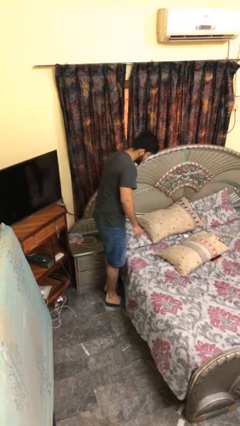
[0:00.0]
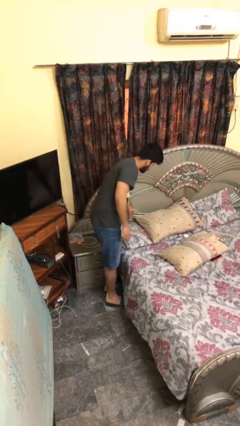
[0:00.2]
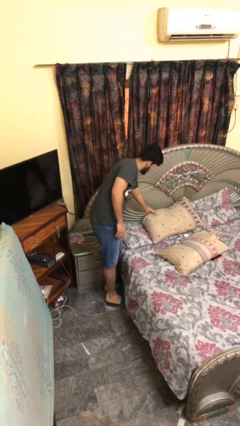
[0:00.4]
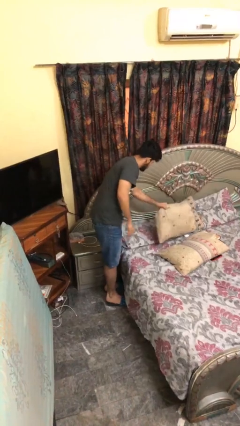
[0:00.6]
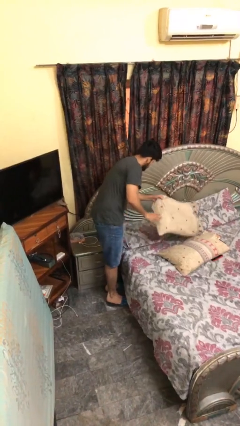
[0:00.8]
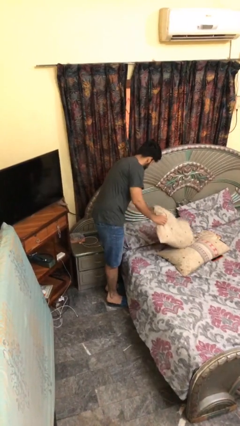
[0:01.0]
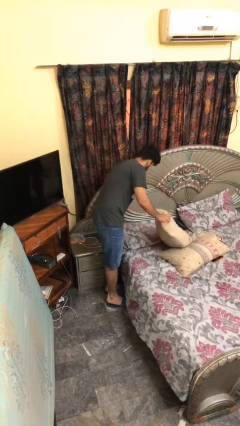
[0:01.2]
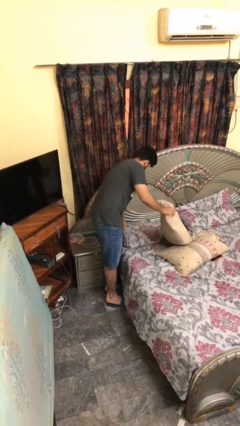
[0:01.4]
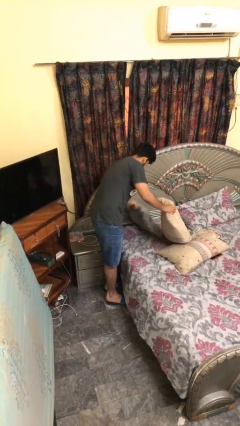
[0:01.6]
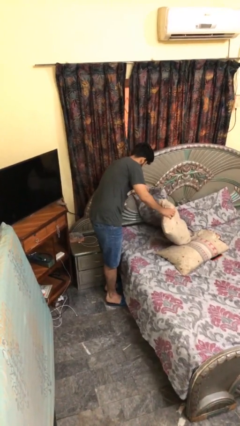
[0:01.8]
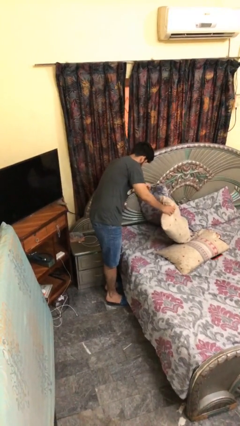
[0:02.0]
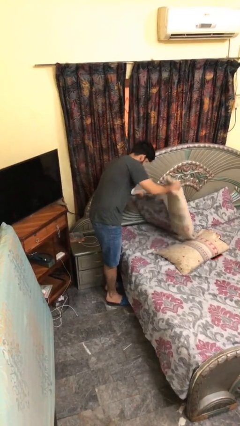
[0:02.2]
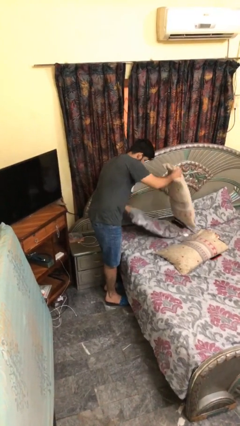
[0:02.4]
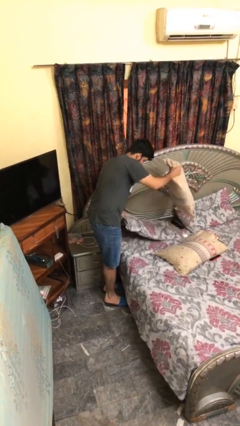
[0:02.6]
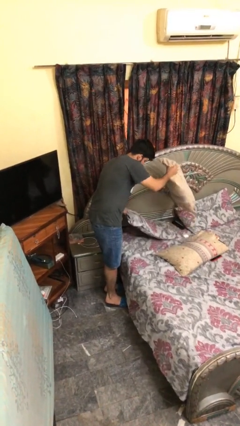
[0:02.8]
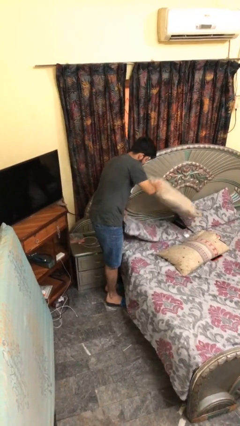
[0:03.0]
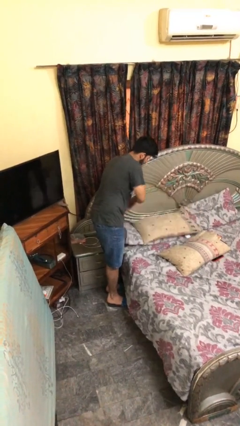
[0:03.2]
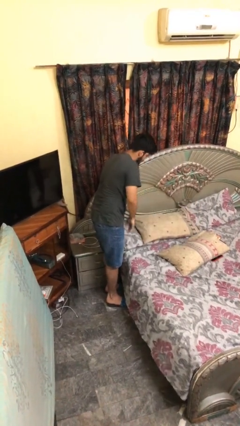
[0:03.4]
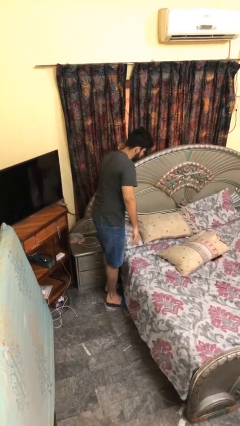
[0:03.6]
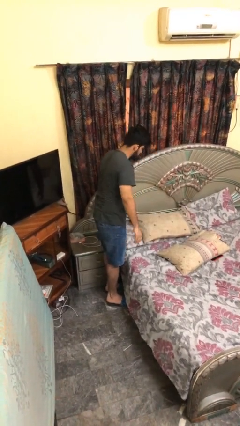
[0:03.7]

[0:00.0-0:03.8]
person searches under bed

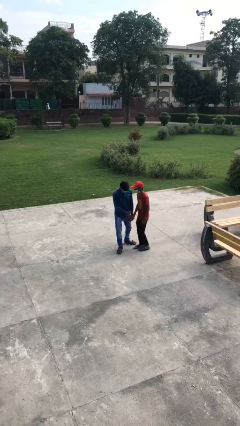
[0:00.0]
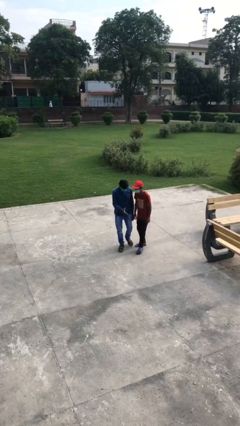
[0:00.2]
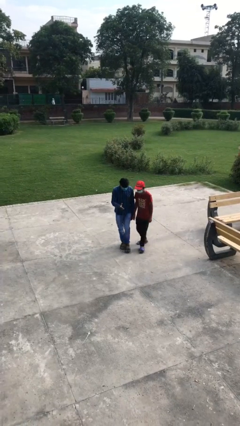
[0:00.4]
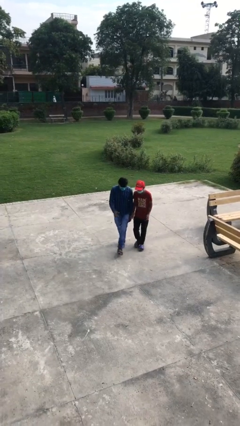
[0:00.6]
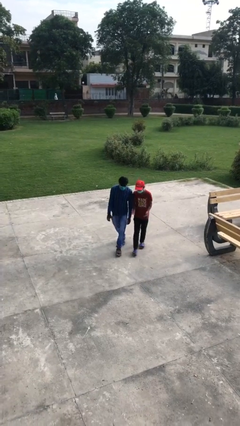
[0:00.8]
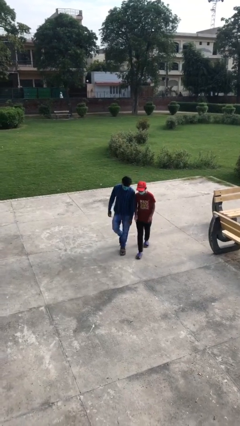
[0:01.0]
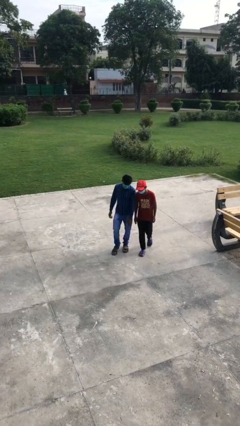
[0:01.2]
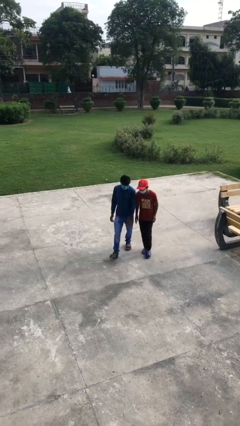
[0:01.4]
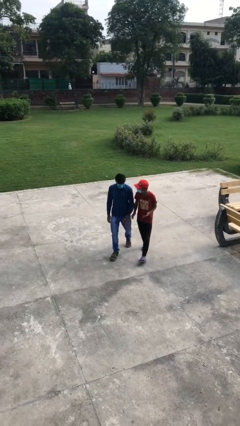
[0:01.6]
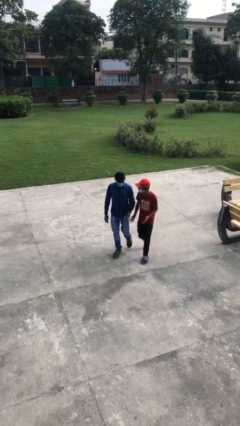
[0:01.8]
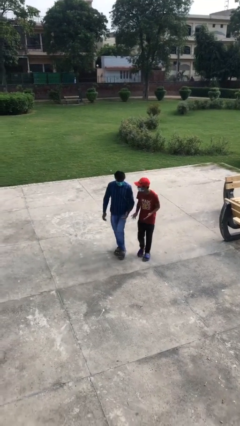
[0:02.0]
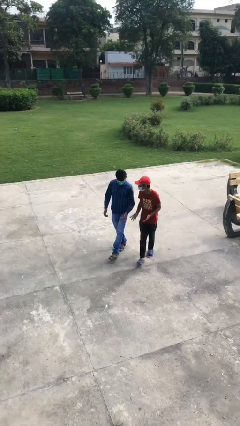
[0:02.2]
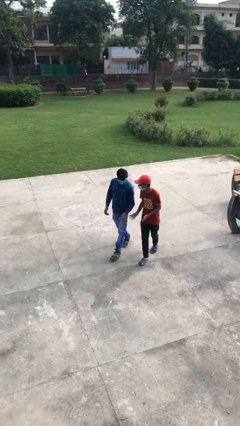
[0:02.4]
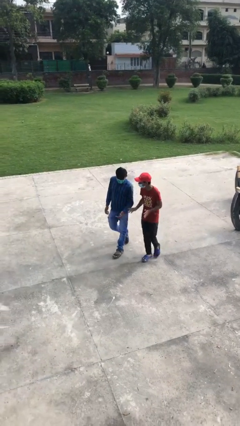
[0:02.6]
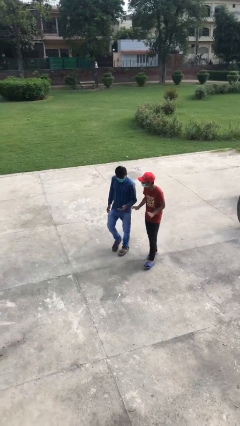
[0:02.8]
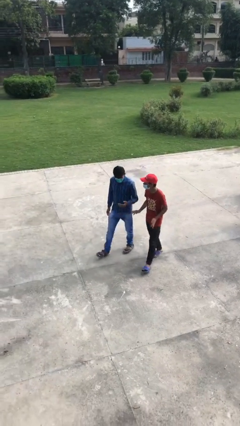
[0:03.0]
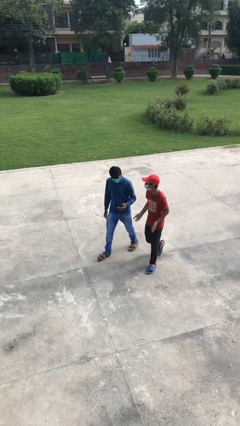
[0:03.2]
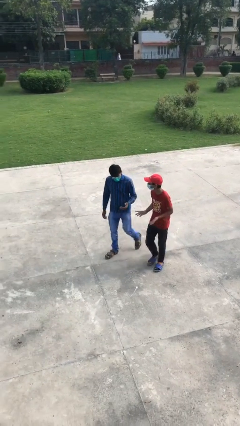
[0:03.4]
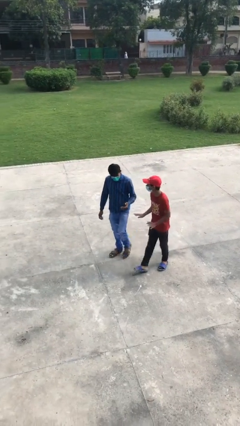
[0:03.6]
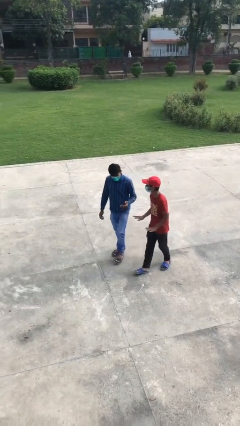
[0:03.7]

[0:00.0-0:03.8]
person talks to person

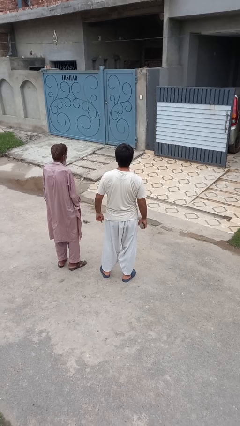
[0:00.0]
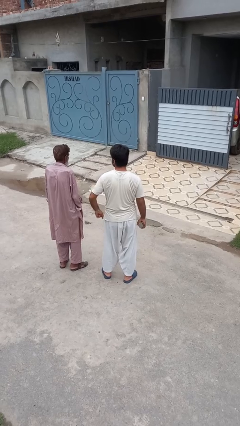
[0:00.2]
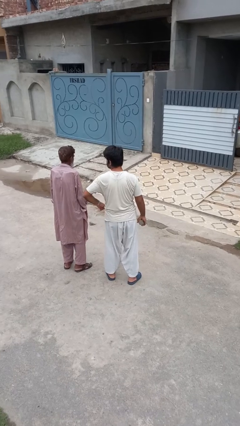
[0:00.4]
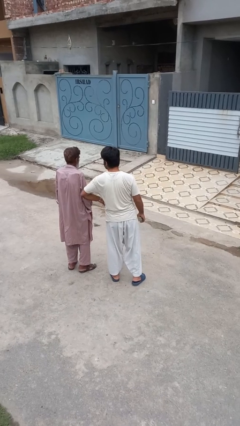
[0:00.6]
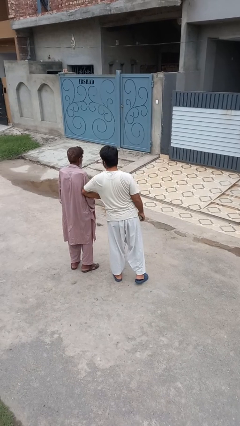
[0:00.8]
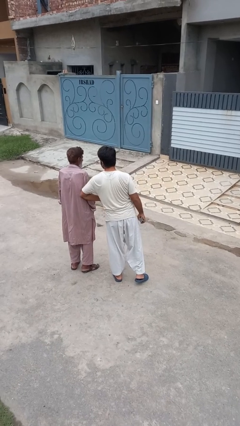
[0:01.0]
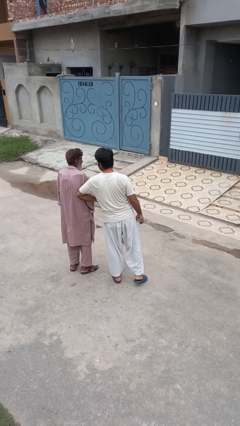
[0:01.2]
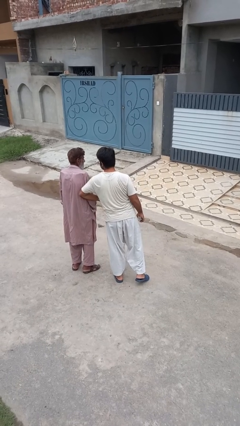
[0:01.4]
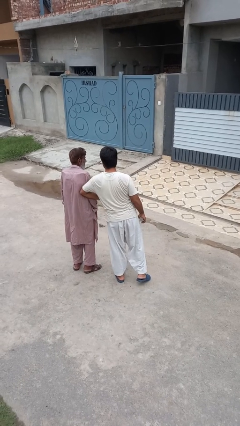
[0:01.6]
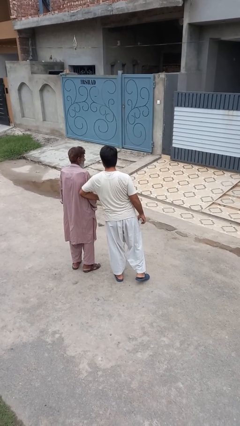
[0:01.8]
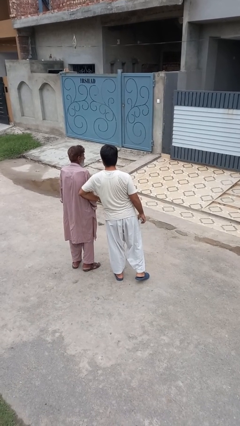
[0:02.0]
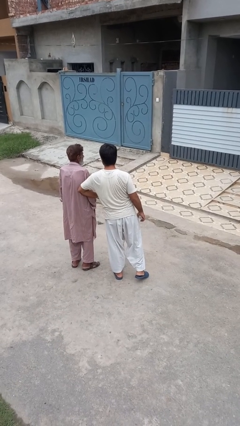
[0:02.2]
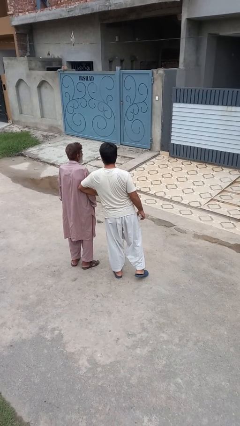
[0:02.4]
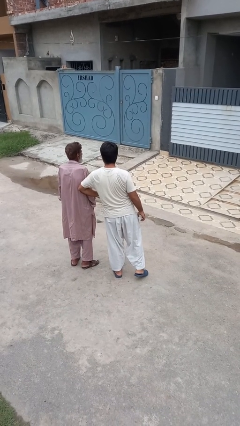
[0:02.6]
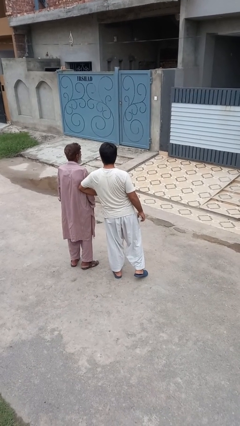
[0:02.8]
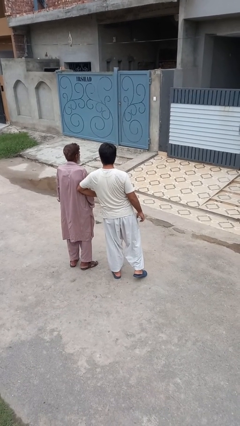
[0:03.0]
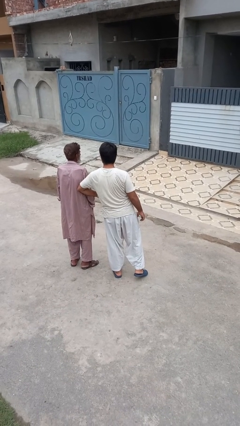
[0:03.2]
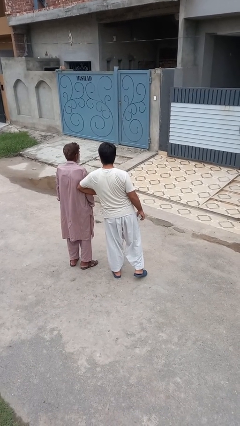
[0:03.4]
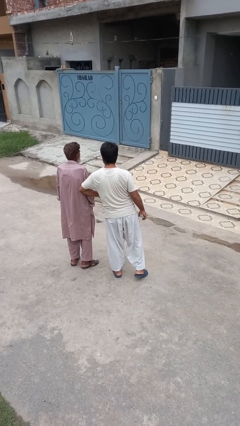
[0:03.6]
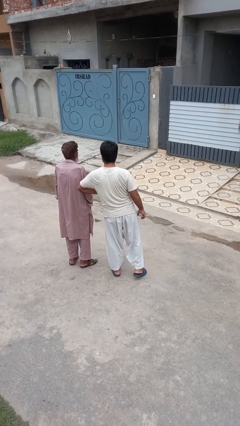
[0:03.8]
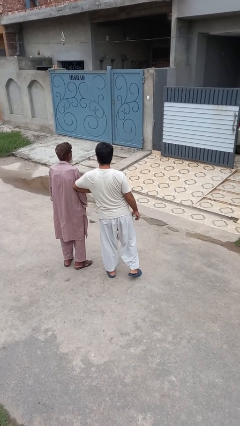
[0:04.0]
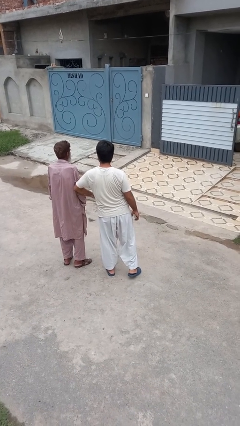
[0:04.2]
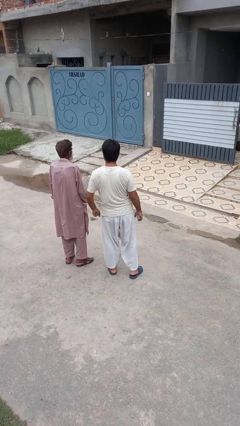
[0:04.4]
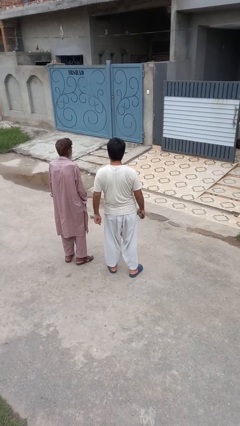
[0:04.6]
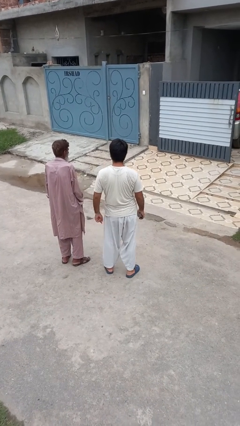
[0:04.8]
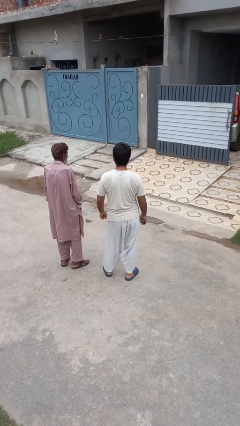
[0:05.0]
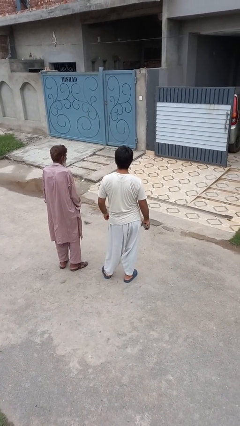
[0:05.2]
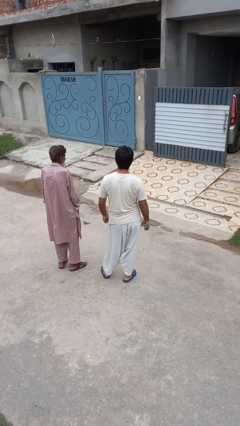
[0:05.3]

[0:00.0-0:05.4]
person nudges person with elbow

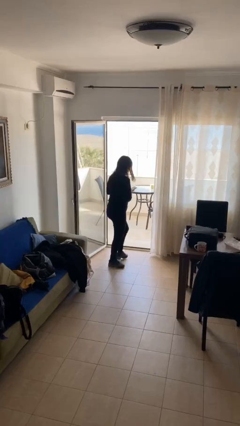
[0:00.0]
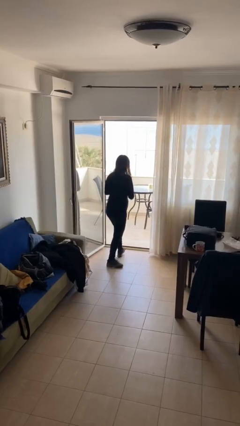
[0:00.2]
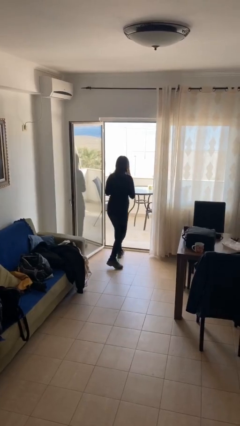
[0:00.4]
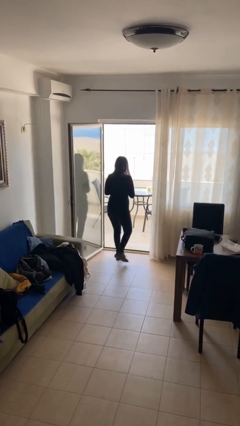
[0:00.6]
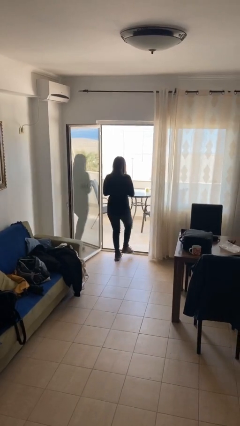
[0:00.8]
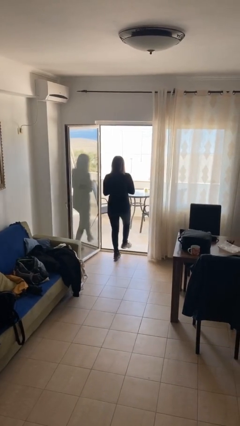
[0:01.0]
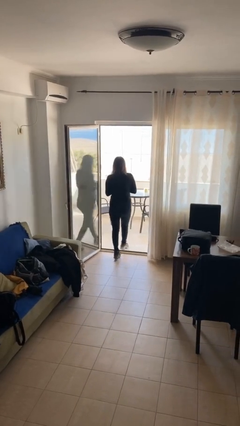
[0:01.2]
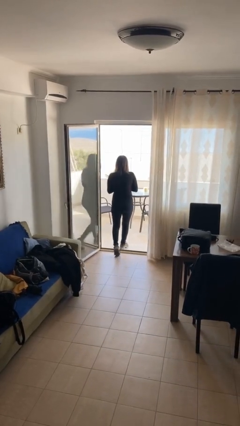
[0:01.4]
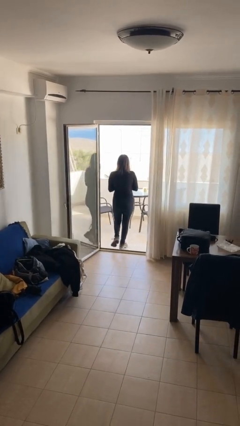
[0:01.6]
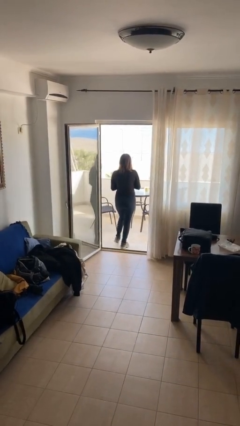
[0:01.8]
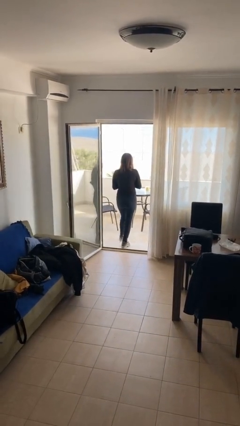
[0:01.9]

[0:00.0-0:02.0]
person exits scene through structure

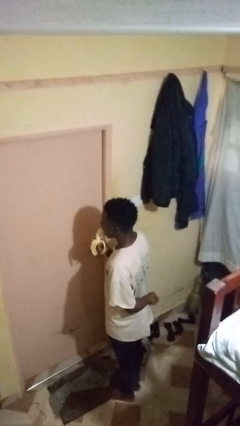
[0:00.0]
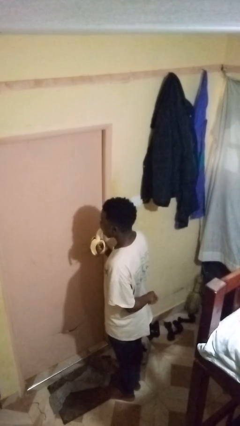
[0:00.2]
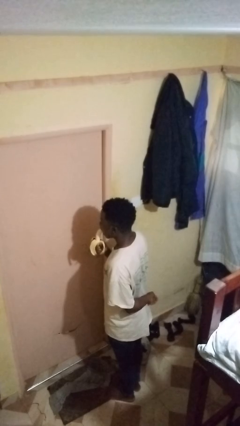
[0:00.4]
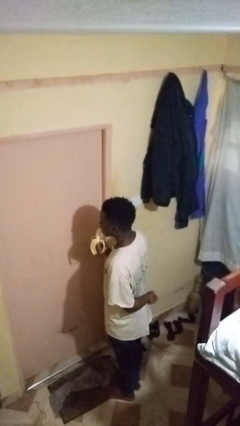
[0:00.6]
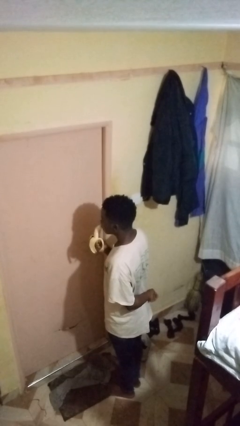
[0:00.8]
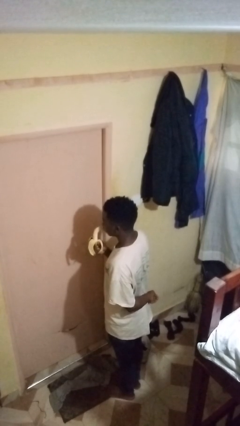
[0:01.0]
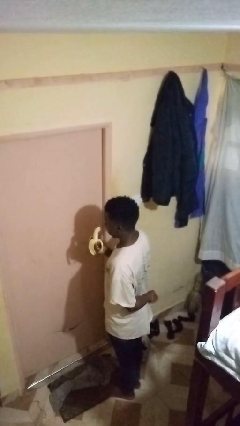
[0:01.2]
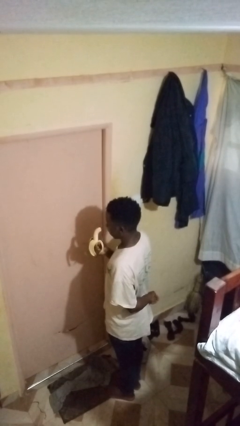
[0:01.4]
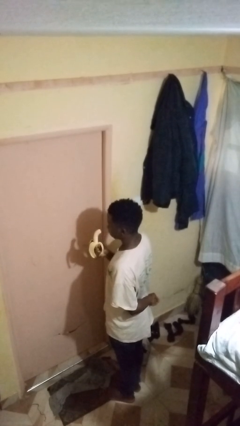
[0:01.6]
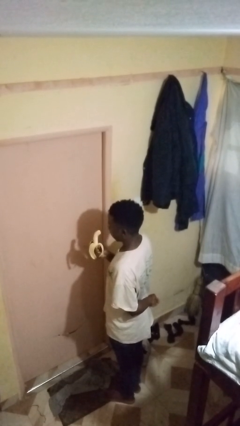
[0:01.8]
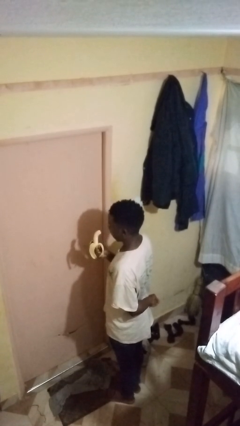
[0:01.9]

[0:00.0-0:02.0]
person eats banana

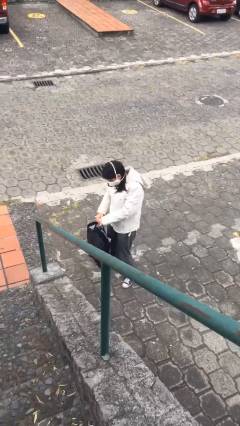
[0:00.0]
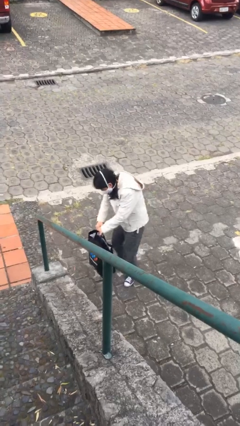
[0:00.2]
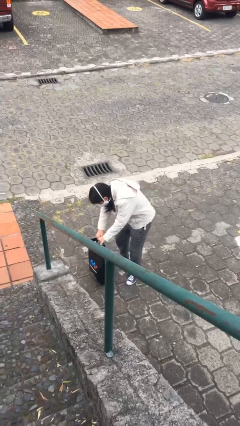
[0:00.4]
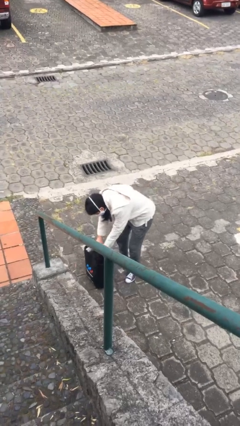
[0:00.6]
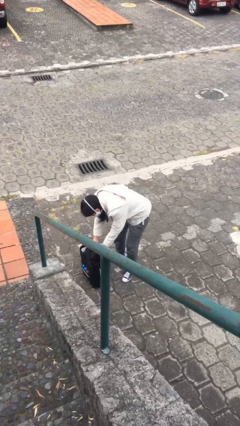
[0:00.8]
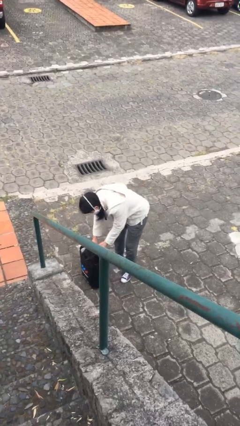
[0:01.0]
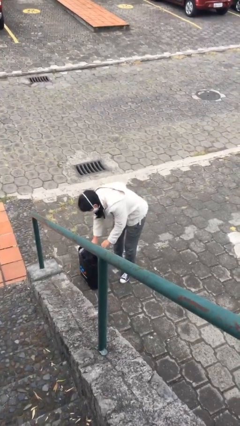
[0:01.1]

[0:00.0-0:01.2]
person puts down object on floor
